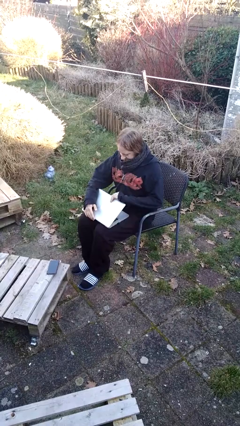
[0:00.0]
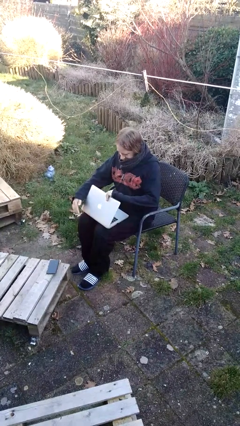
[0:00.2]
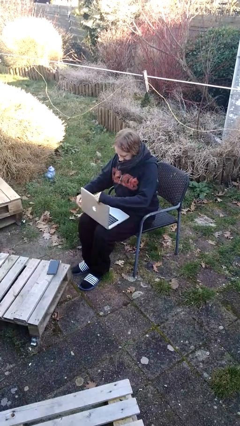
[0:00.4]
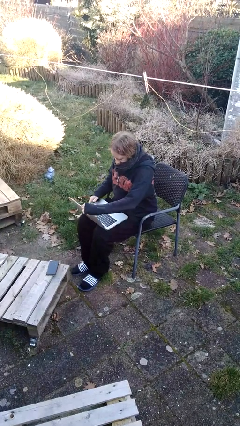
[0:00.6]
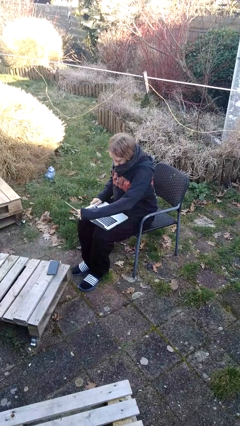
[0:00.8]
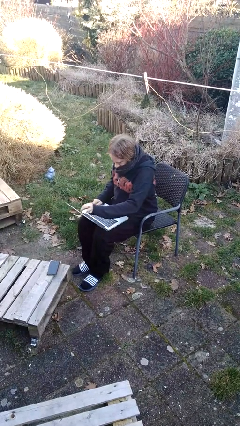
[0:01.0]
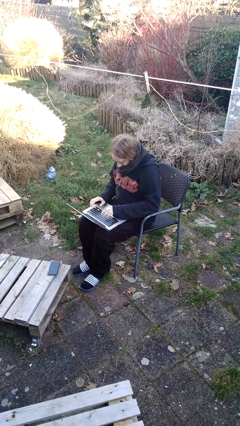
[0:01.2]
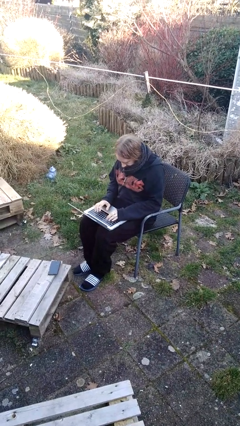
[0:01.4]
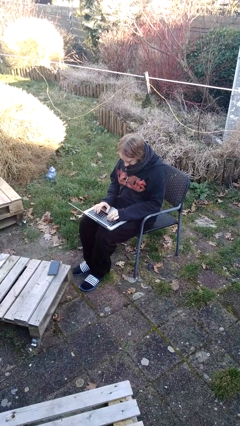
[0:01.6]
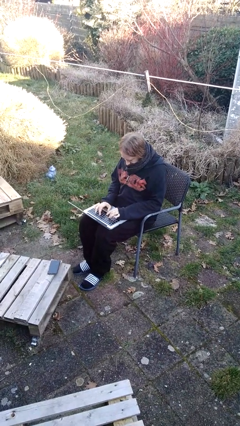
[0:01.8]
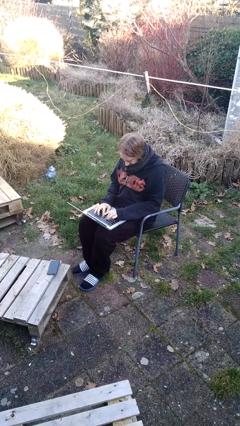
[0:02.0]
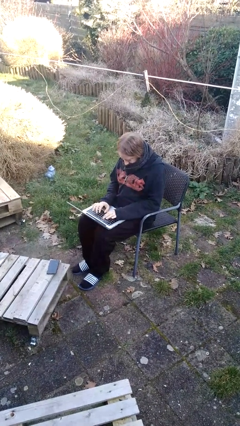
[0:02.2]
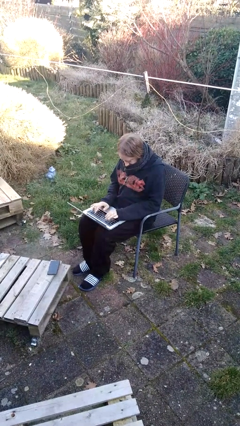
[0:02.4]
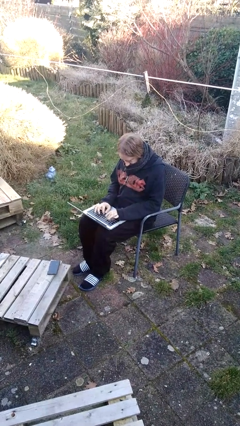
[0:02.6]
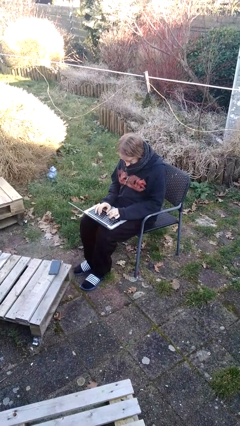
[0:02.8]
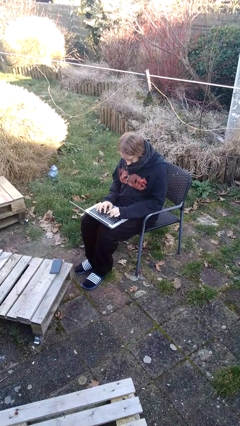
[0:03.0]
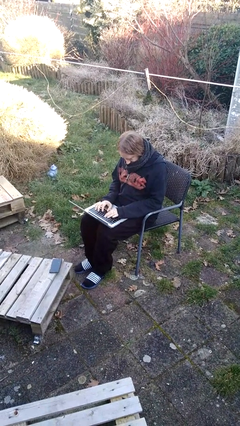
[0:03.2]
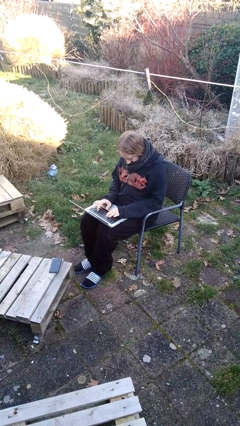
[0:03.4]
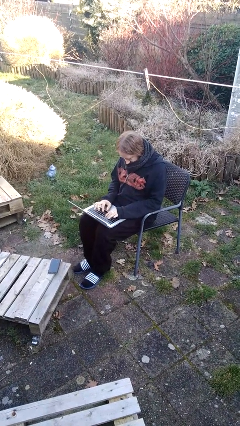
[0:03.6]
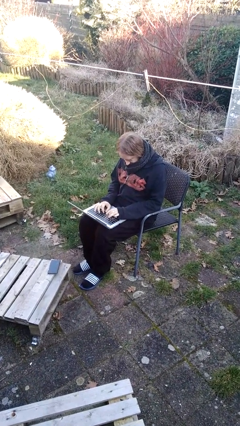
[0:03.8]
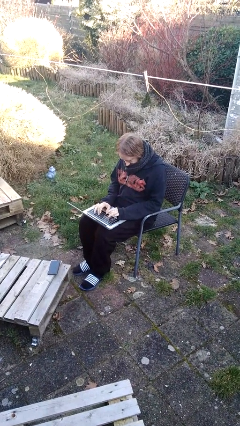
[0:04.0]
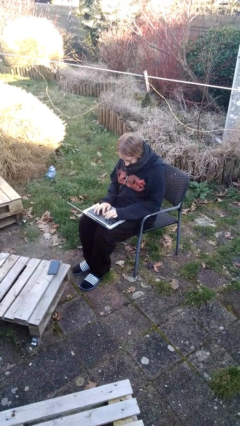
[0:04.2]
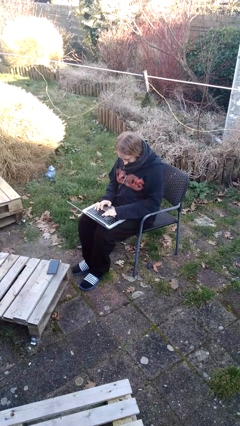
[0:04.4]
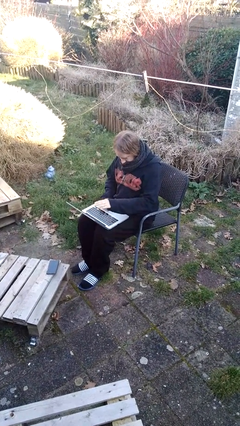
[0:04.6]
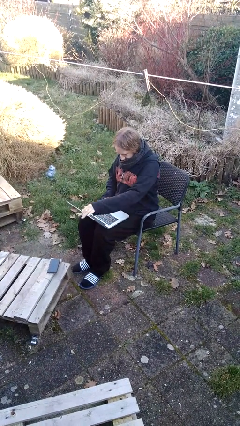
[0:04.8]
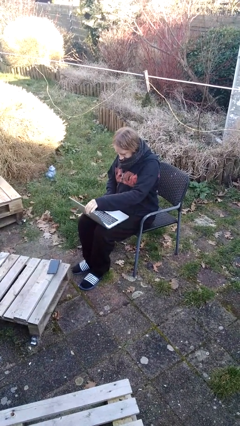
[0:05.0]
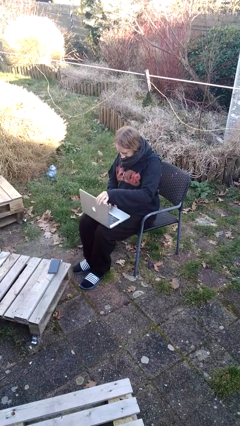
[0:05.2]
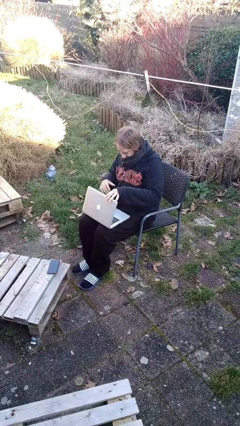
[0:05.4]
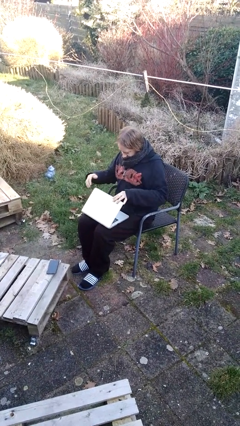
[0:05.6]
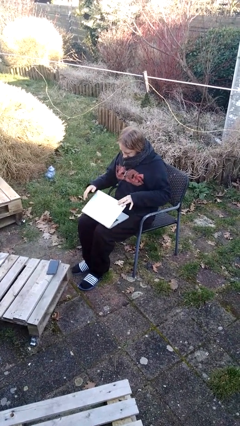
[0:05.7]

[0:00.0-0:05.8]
person interacts with laptop

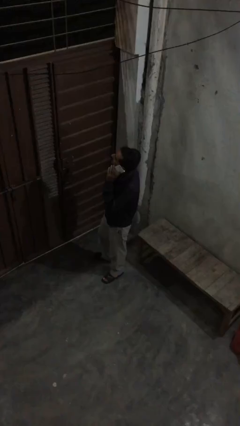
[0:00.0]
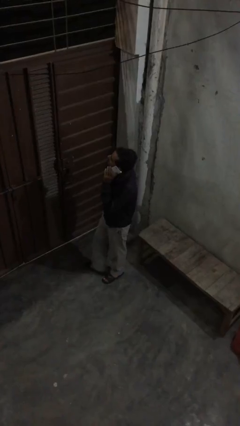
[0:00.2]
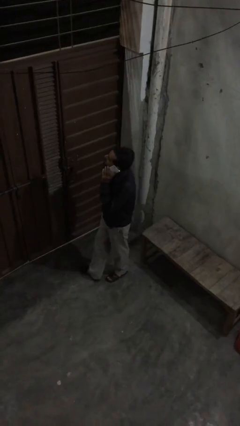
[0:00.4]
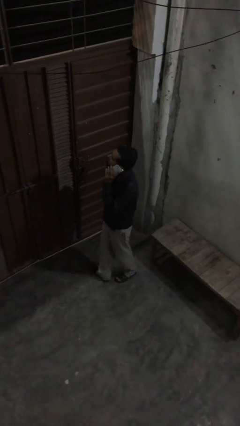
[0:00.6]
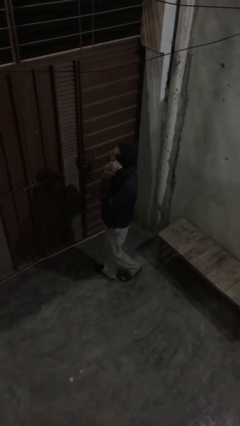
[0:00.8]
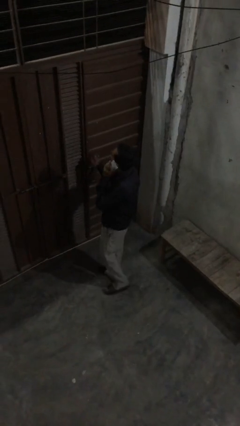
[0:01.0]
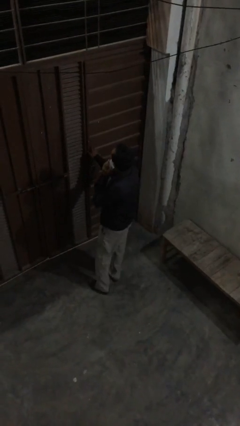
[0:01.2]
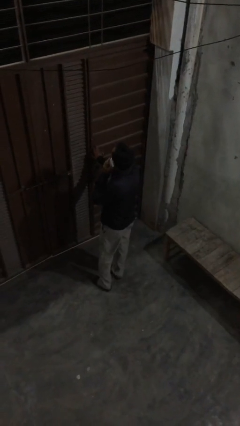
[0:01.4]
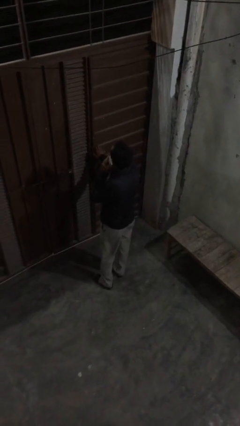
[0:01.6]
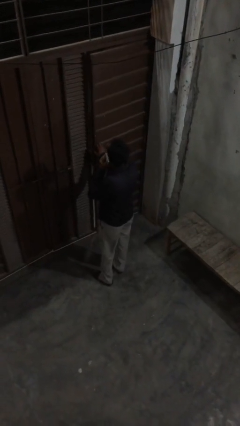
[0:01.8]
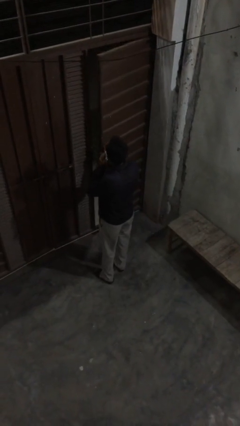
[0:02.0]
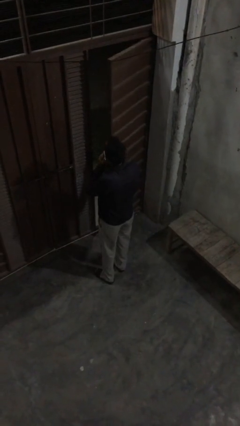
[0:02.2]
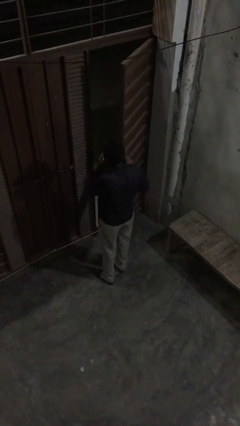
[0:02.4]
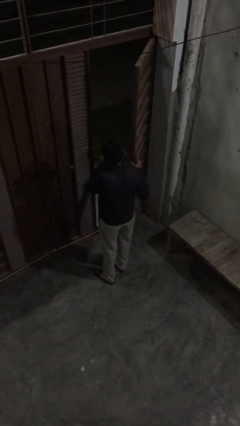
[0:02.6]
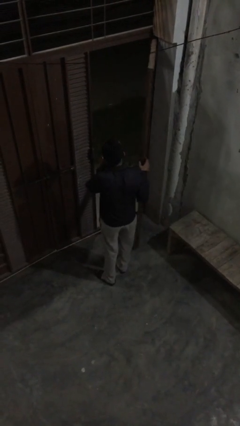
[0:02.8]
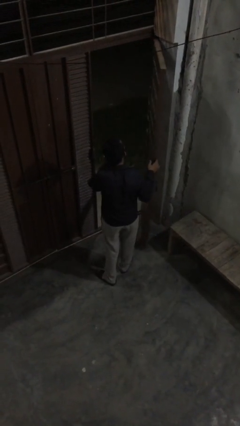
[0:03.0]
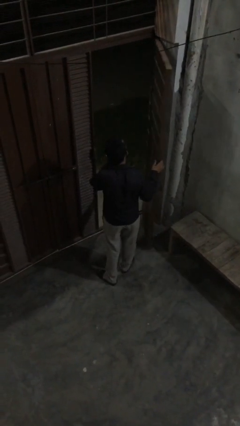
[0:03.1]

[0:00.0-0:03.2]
person opens facility door

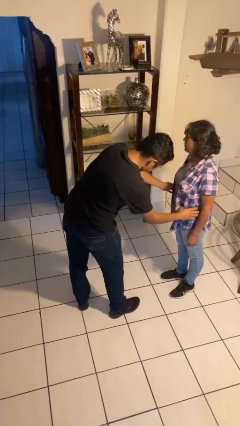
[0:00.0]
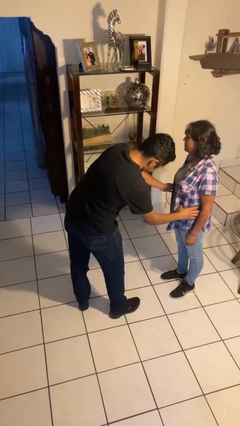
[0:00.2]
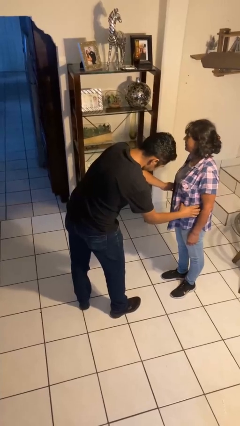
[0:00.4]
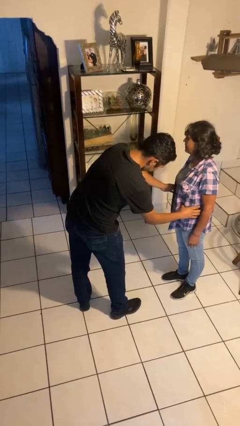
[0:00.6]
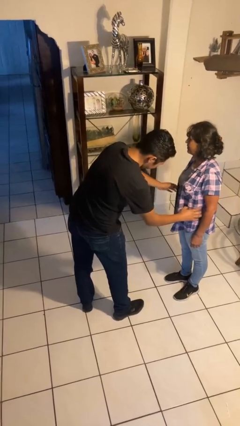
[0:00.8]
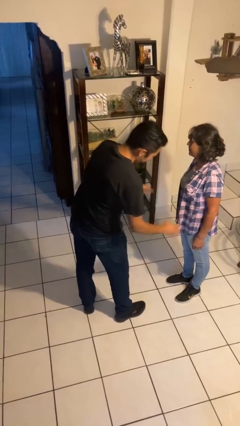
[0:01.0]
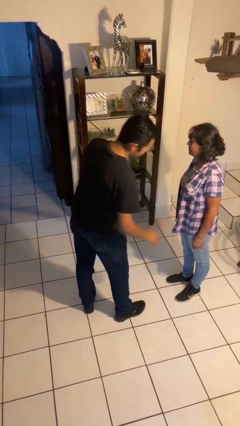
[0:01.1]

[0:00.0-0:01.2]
person tickles person

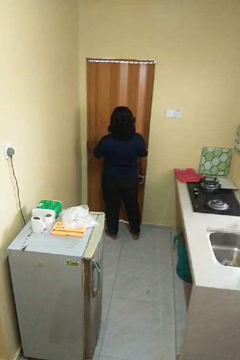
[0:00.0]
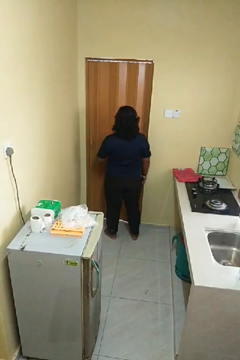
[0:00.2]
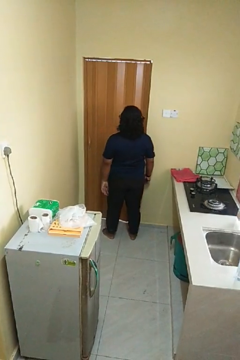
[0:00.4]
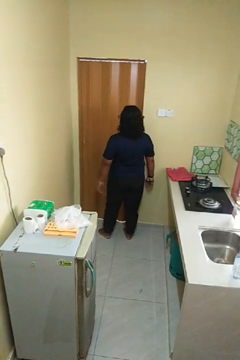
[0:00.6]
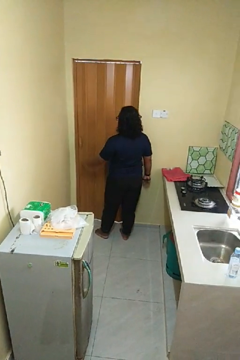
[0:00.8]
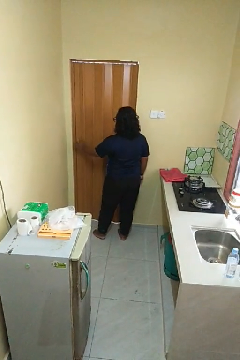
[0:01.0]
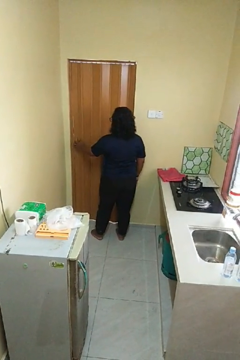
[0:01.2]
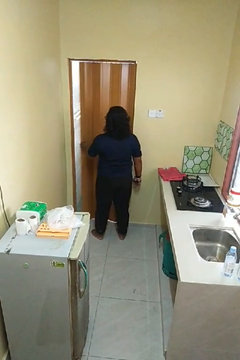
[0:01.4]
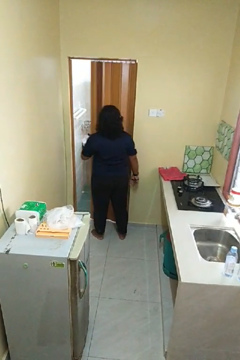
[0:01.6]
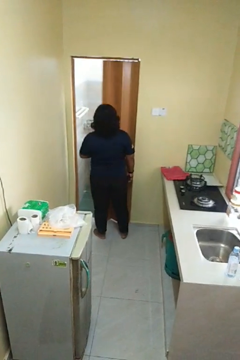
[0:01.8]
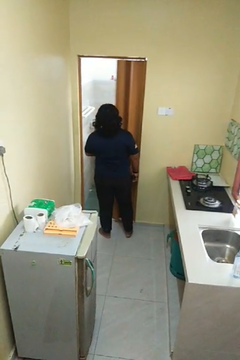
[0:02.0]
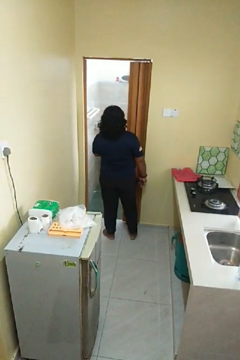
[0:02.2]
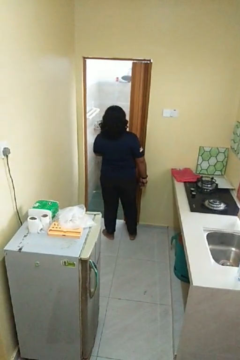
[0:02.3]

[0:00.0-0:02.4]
person opens sliding door

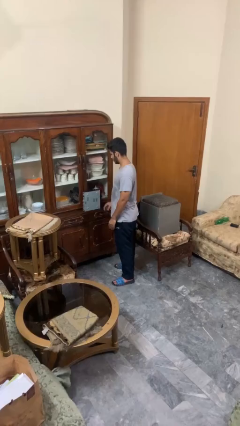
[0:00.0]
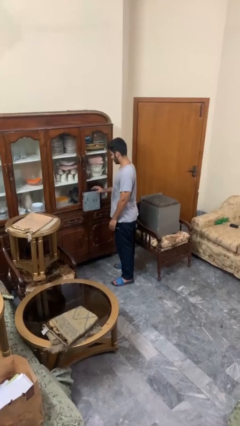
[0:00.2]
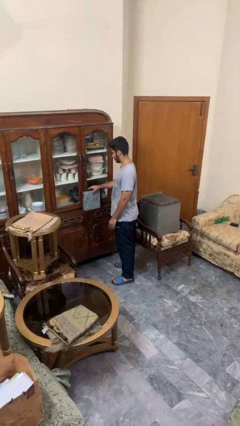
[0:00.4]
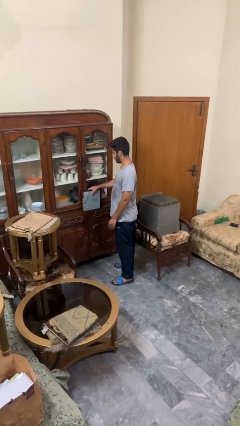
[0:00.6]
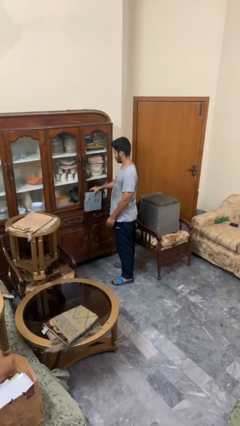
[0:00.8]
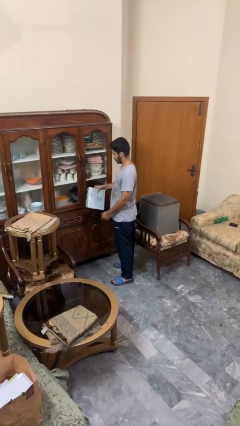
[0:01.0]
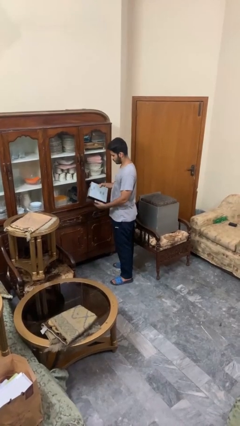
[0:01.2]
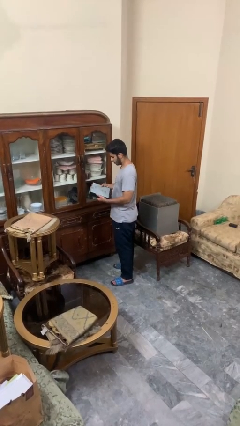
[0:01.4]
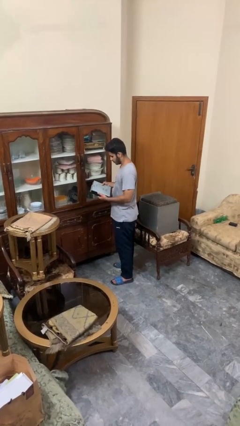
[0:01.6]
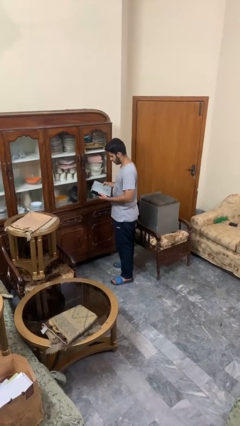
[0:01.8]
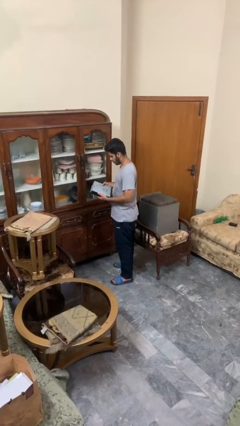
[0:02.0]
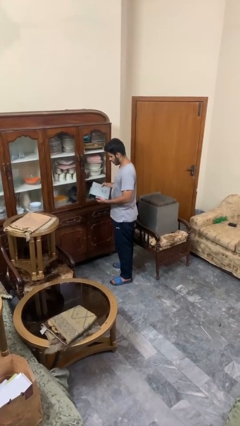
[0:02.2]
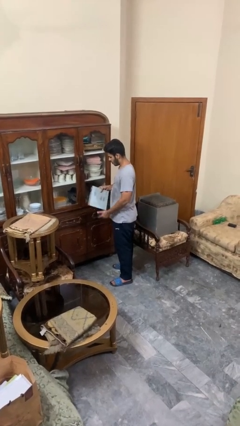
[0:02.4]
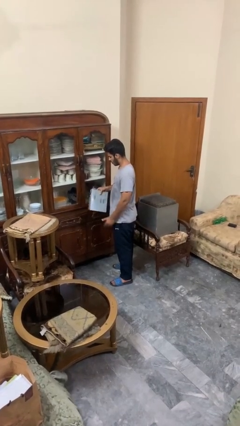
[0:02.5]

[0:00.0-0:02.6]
person picks up object from countertop

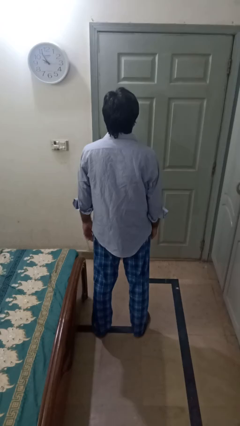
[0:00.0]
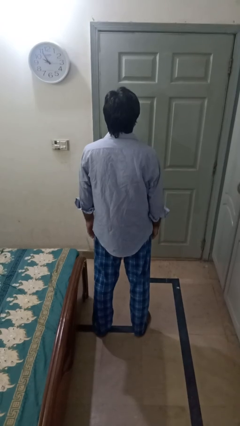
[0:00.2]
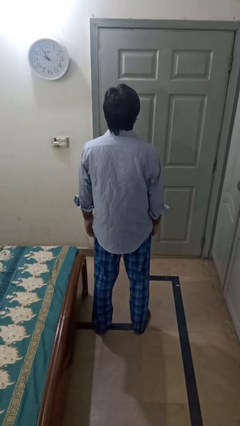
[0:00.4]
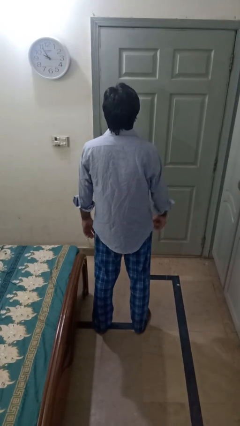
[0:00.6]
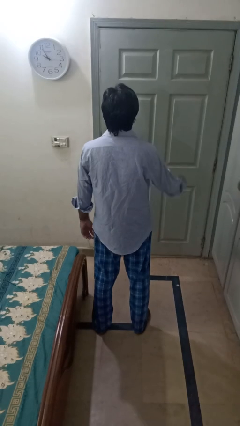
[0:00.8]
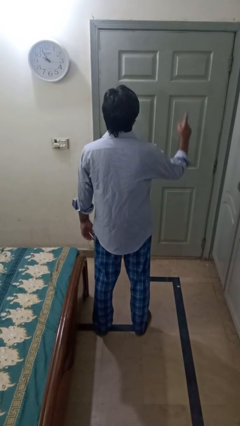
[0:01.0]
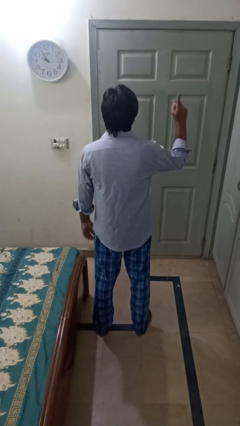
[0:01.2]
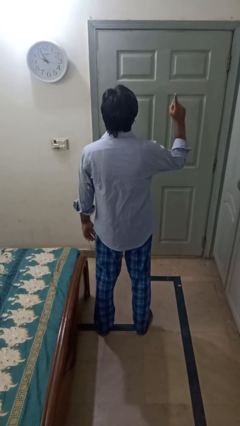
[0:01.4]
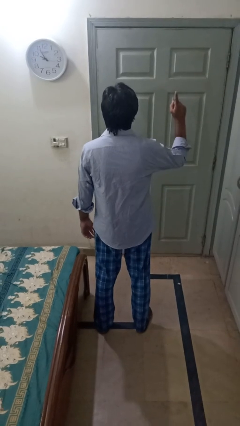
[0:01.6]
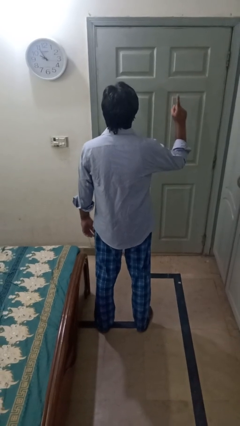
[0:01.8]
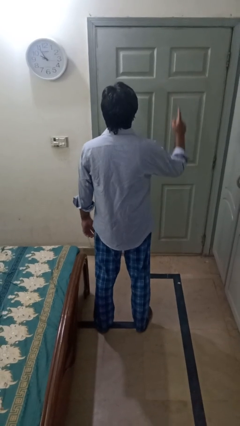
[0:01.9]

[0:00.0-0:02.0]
person gestures number one

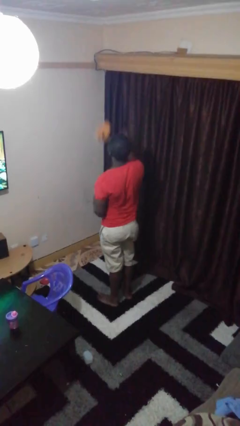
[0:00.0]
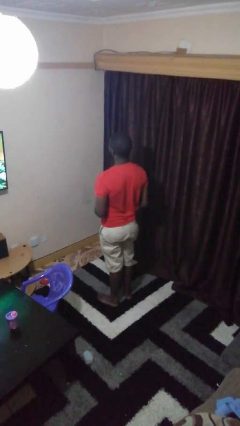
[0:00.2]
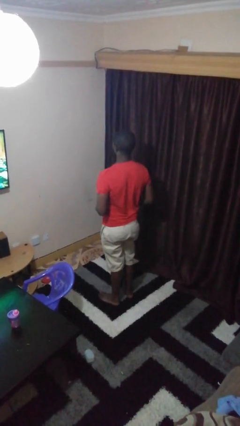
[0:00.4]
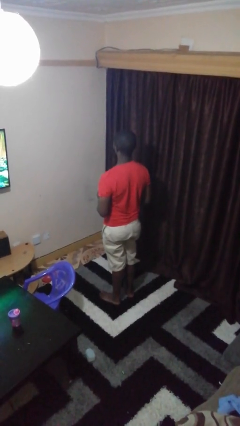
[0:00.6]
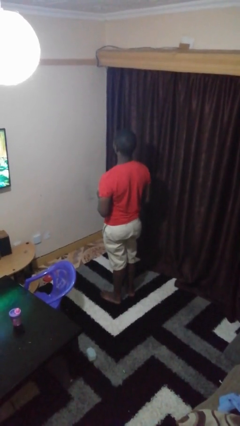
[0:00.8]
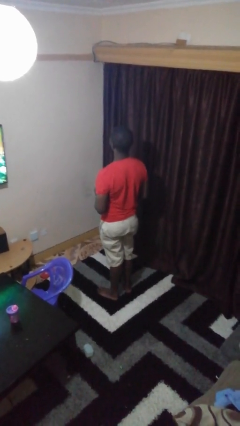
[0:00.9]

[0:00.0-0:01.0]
person catches dropped object
